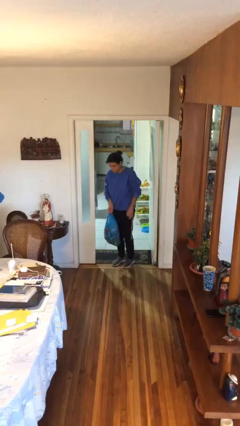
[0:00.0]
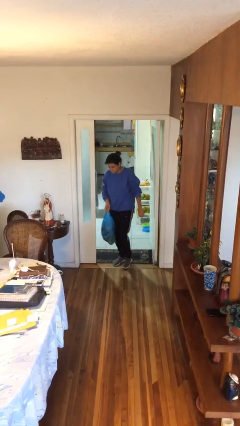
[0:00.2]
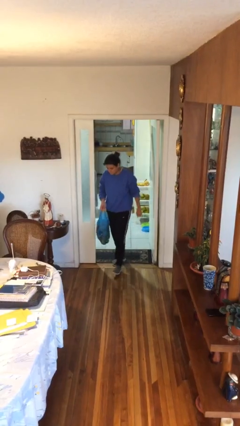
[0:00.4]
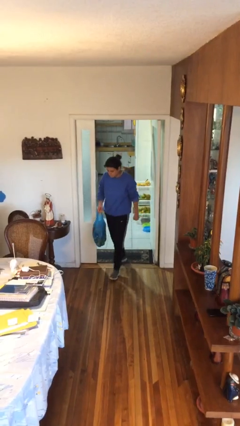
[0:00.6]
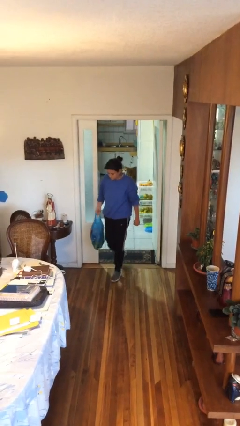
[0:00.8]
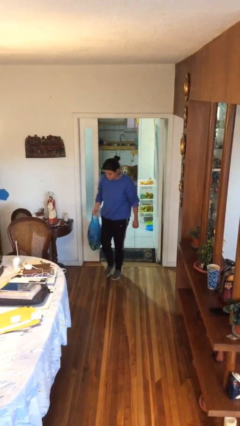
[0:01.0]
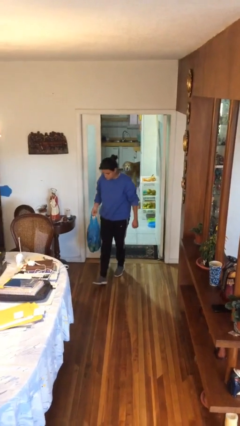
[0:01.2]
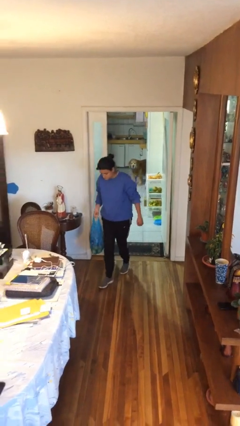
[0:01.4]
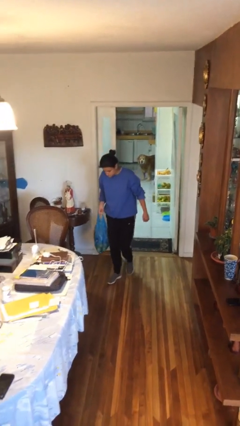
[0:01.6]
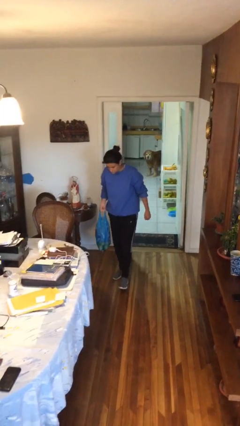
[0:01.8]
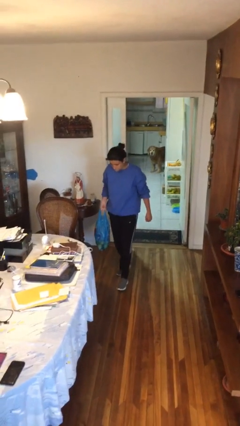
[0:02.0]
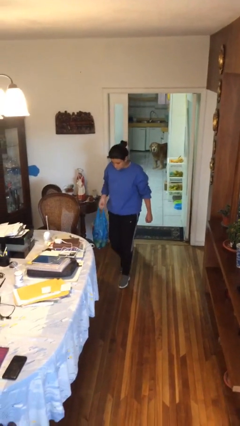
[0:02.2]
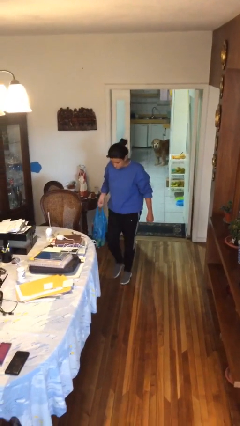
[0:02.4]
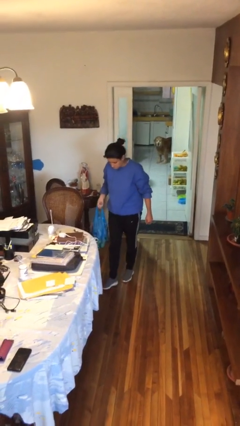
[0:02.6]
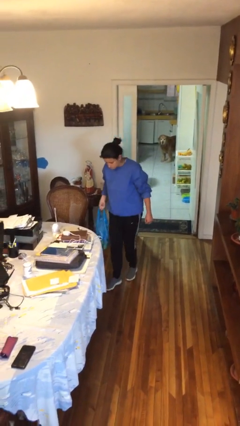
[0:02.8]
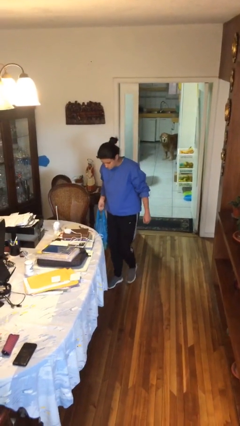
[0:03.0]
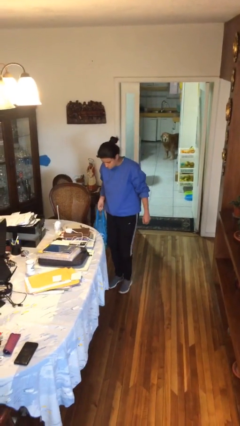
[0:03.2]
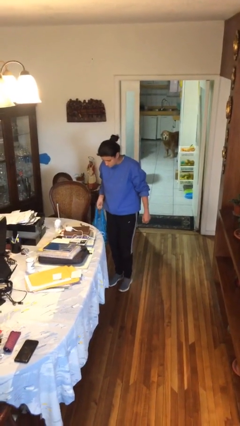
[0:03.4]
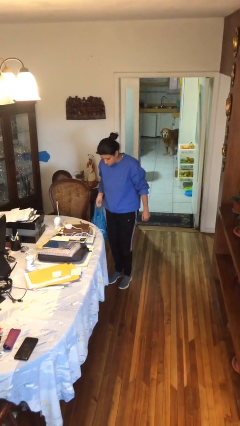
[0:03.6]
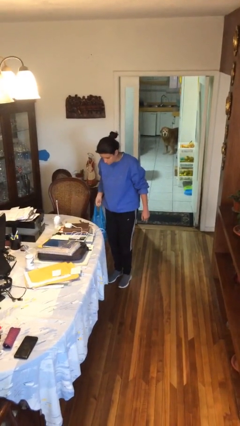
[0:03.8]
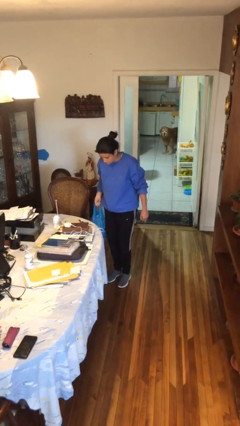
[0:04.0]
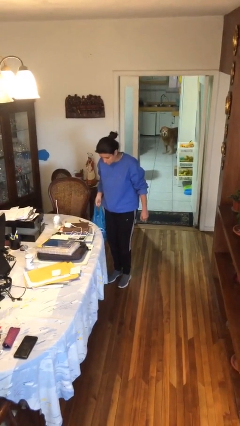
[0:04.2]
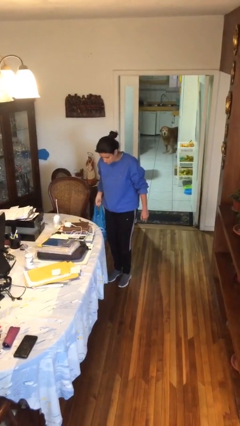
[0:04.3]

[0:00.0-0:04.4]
person carries groceries

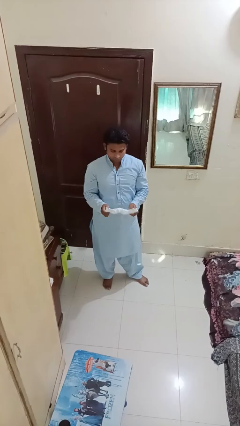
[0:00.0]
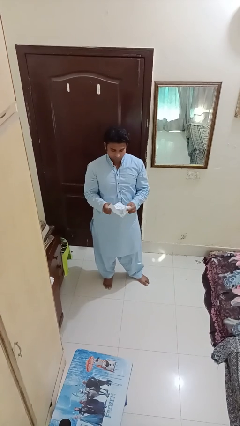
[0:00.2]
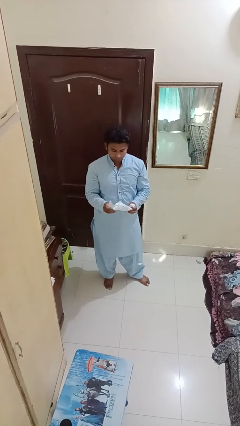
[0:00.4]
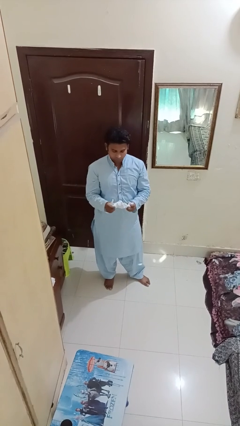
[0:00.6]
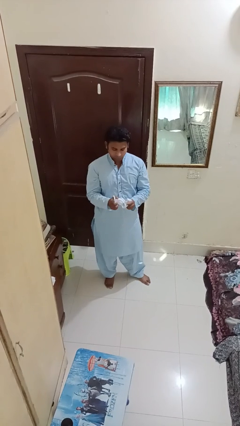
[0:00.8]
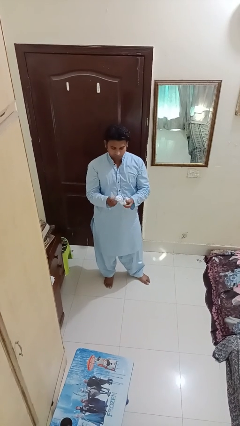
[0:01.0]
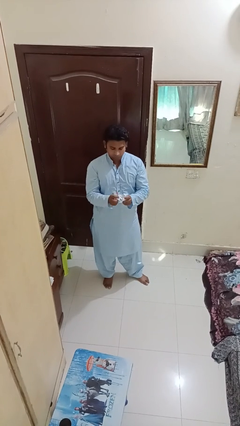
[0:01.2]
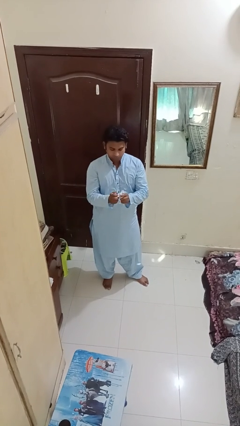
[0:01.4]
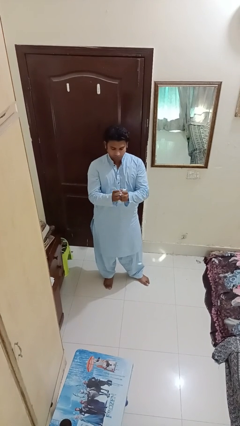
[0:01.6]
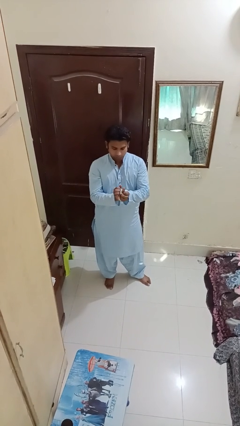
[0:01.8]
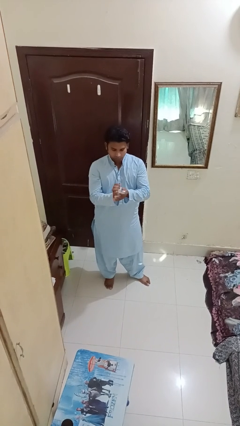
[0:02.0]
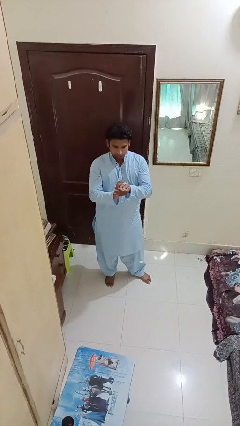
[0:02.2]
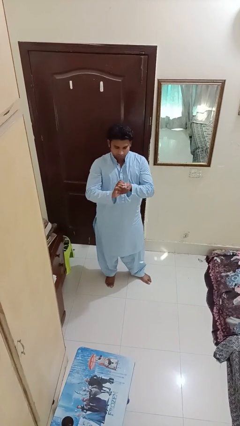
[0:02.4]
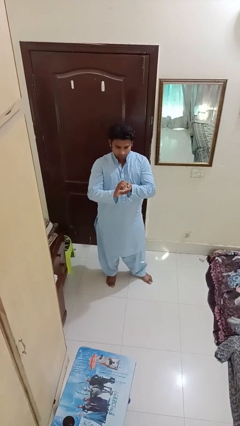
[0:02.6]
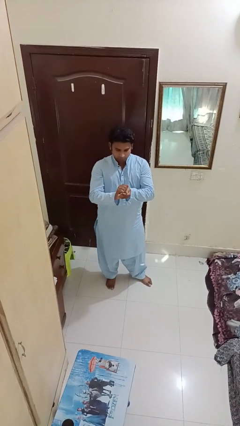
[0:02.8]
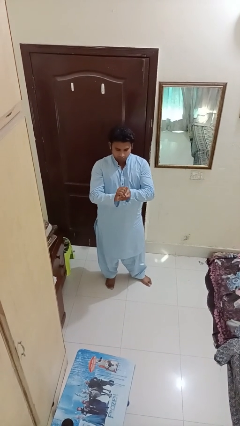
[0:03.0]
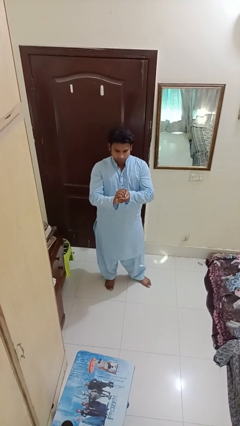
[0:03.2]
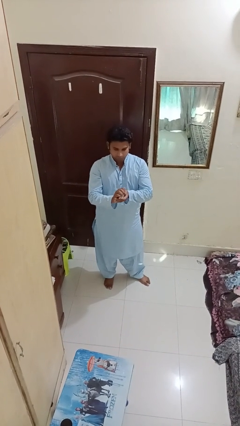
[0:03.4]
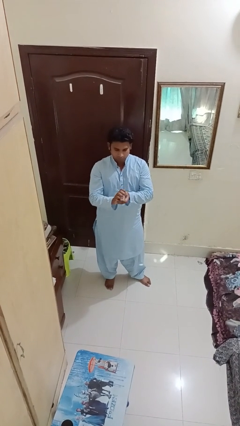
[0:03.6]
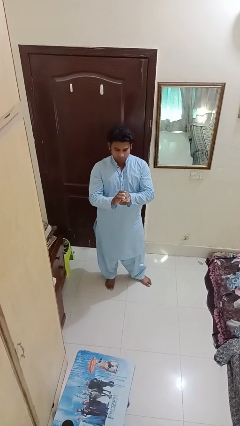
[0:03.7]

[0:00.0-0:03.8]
person crumples paper

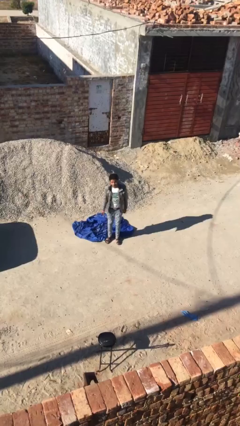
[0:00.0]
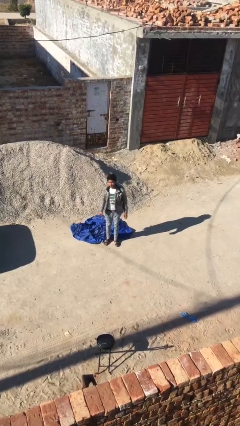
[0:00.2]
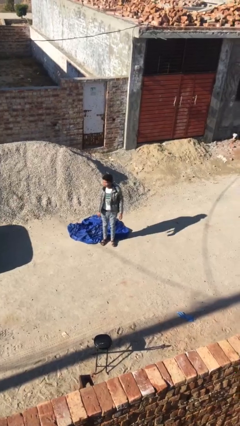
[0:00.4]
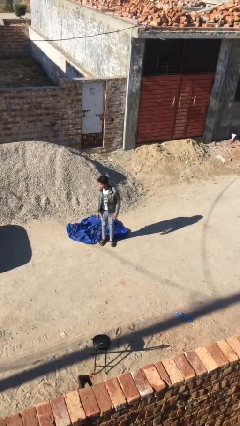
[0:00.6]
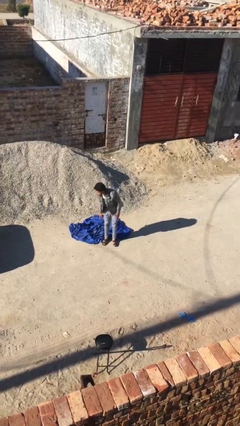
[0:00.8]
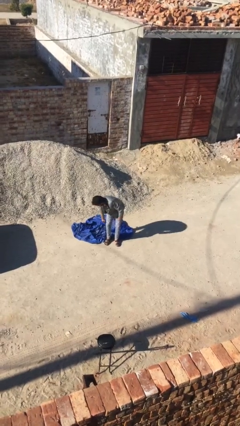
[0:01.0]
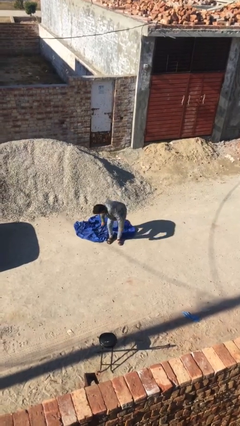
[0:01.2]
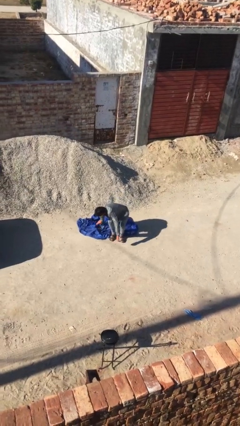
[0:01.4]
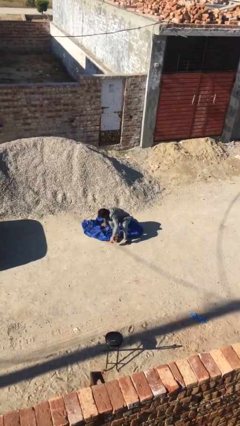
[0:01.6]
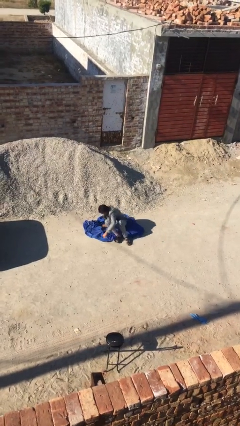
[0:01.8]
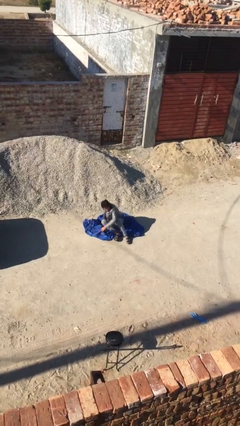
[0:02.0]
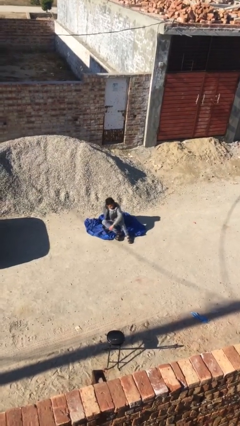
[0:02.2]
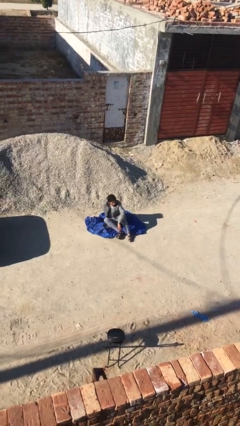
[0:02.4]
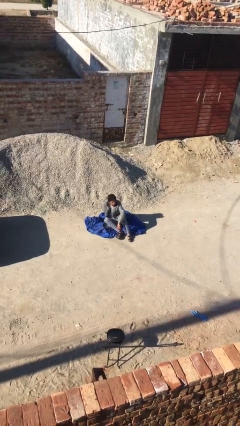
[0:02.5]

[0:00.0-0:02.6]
person sits down

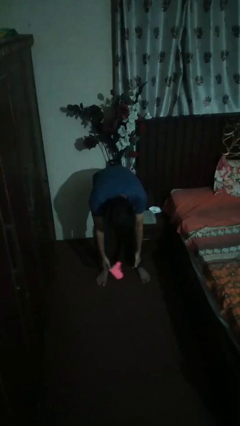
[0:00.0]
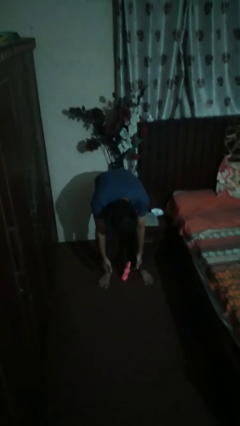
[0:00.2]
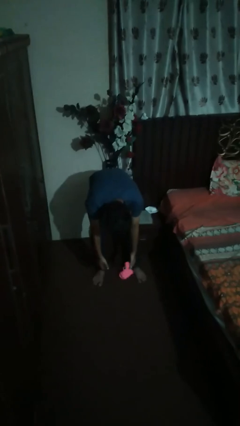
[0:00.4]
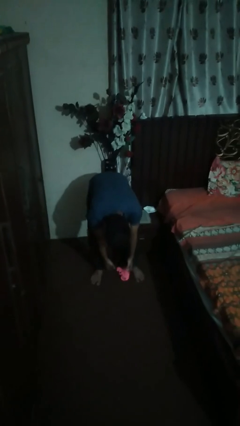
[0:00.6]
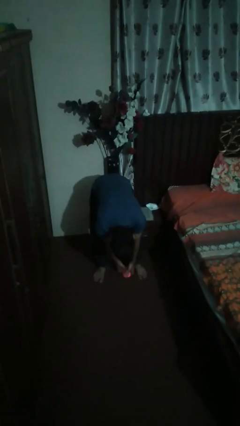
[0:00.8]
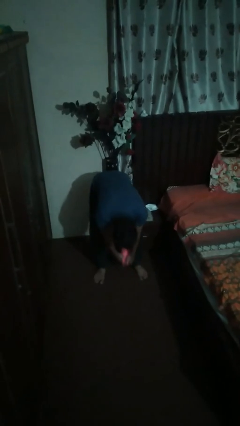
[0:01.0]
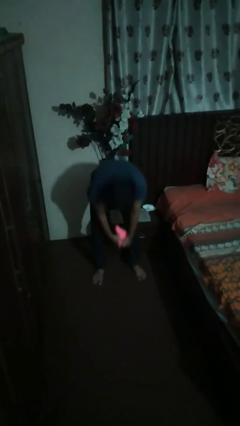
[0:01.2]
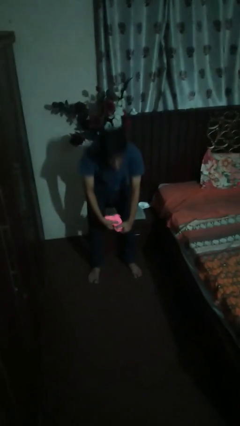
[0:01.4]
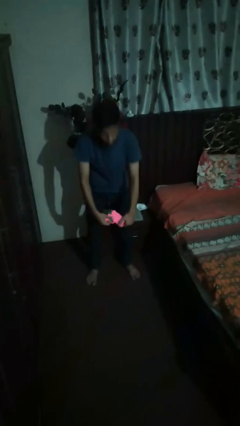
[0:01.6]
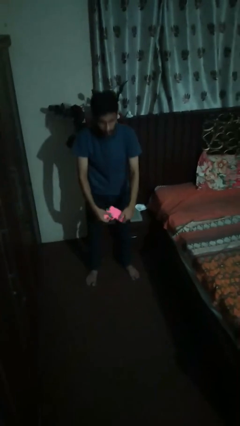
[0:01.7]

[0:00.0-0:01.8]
person picks up object from floor

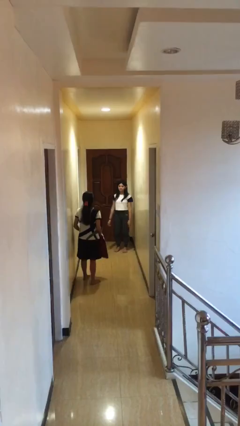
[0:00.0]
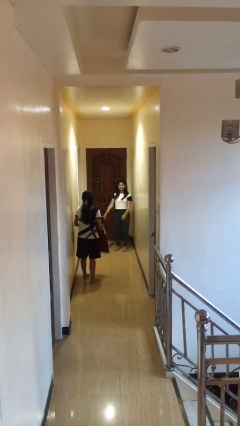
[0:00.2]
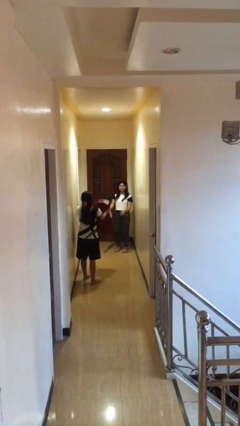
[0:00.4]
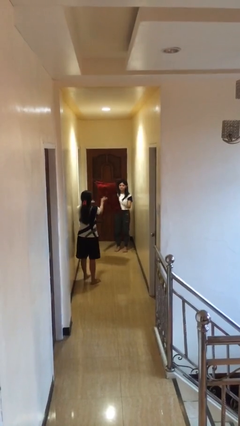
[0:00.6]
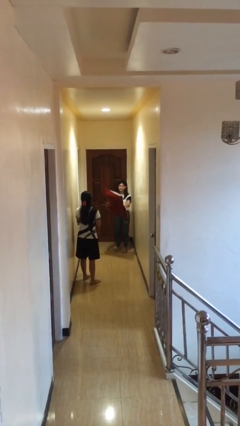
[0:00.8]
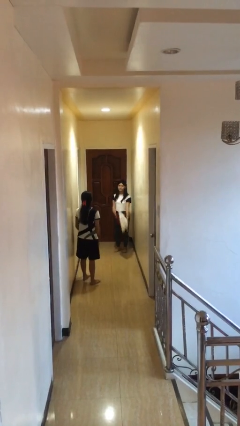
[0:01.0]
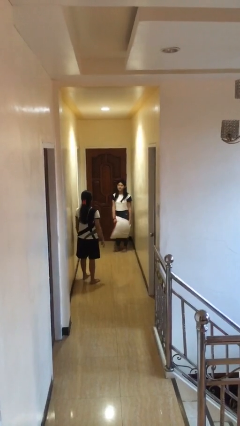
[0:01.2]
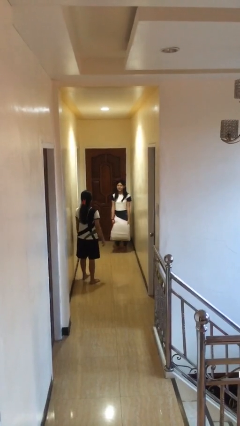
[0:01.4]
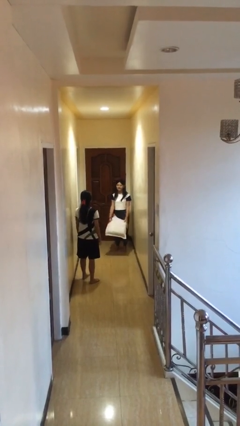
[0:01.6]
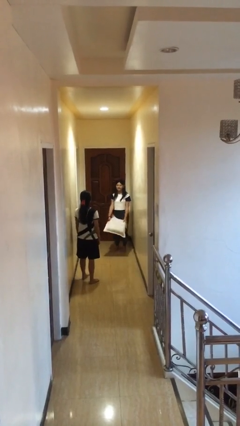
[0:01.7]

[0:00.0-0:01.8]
person catches object from person

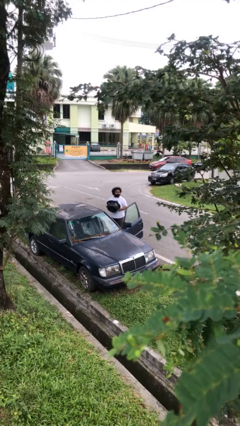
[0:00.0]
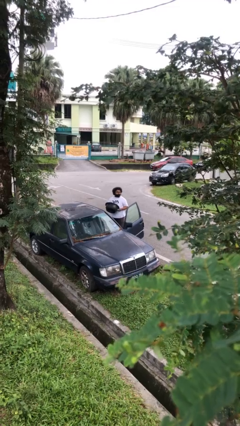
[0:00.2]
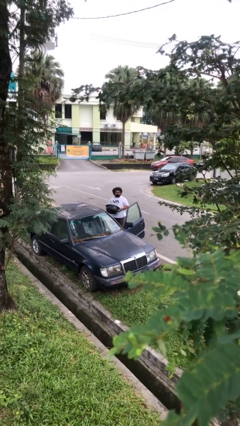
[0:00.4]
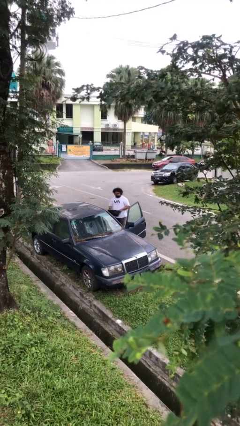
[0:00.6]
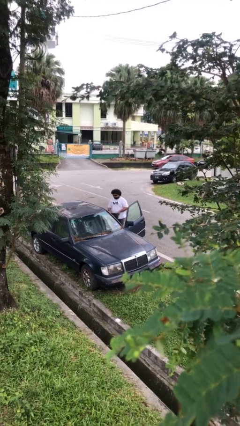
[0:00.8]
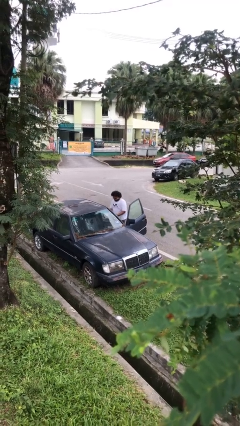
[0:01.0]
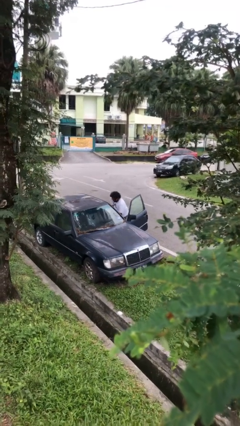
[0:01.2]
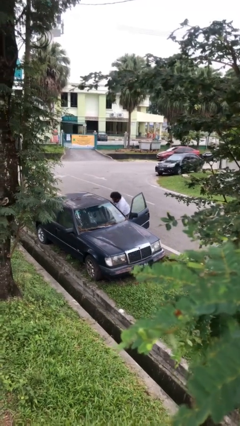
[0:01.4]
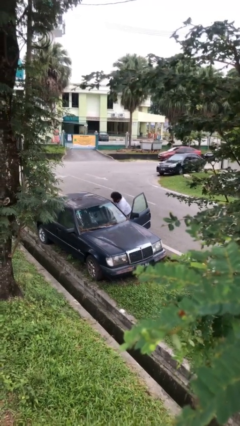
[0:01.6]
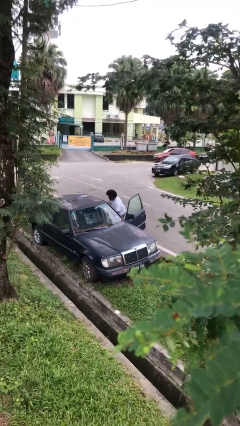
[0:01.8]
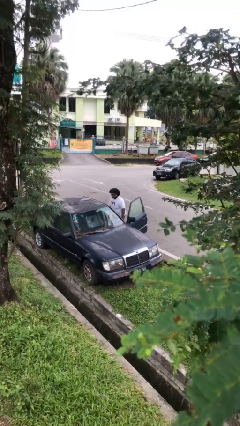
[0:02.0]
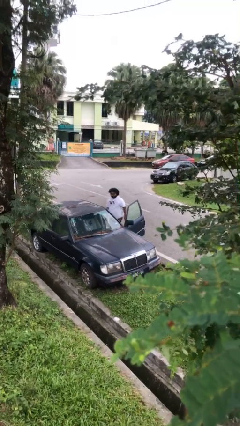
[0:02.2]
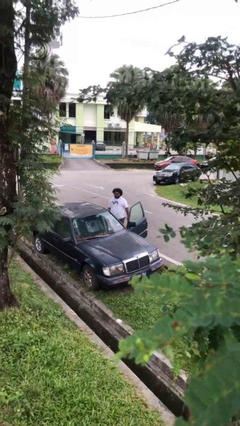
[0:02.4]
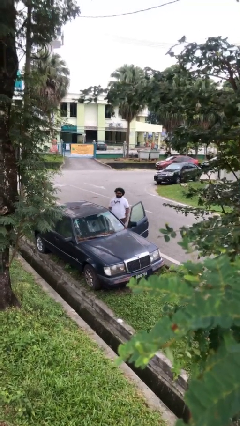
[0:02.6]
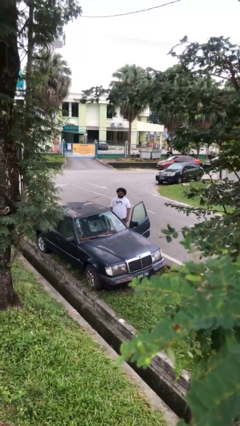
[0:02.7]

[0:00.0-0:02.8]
person loads car
